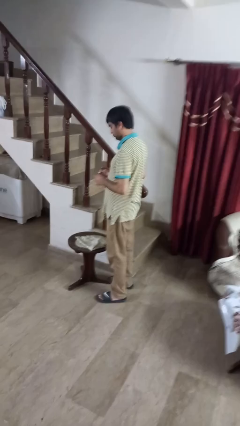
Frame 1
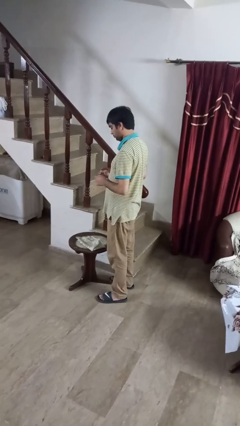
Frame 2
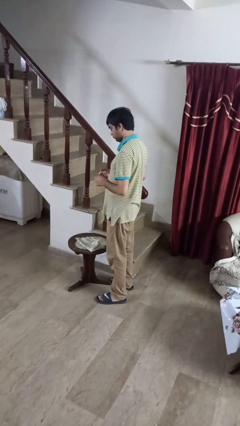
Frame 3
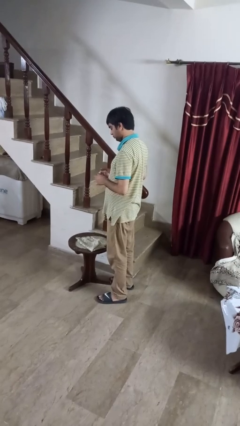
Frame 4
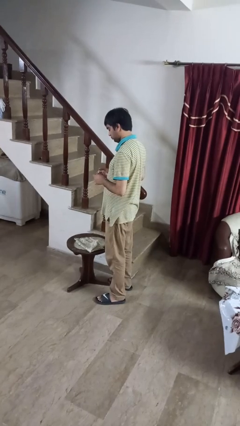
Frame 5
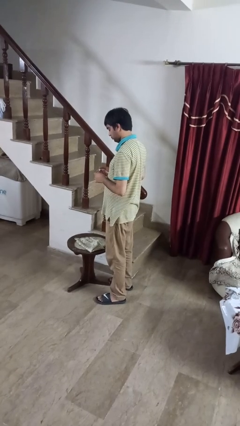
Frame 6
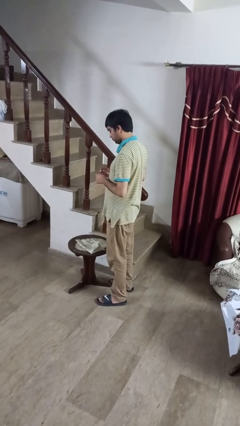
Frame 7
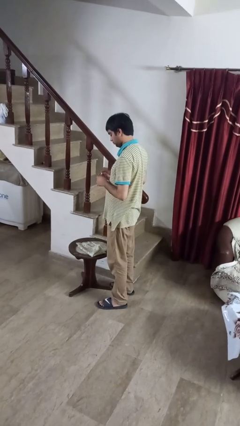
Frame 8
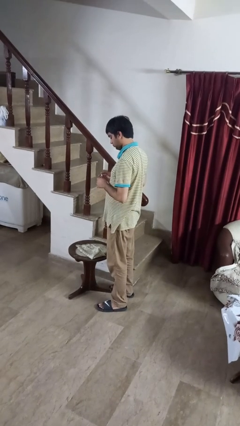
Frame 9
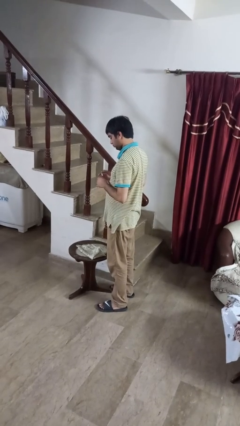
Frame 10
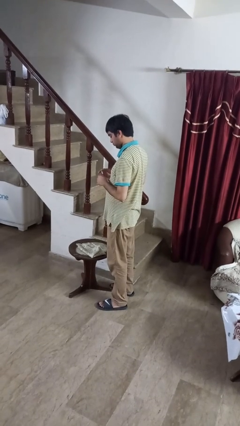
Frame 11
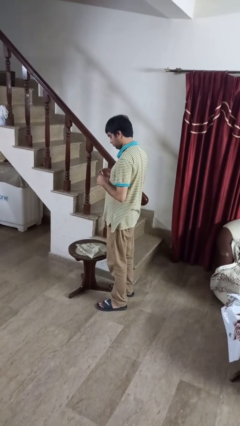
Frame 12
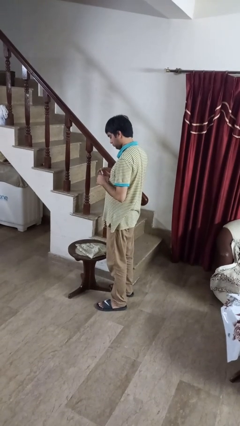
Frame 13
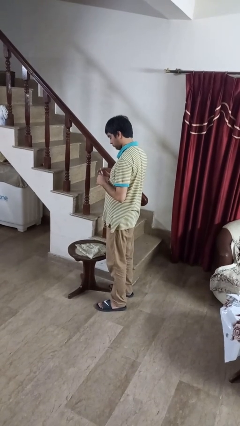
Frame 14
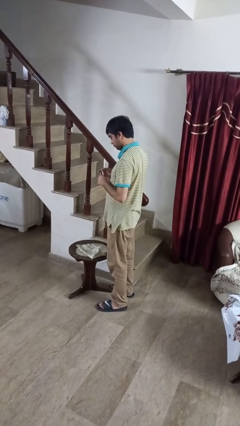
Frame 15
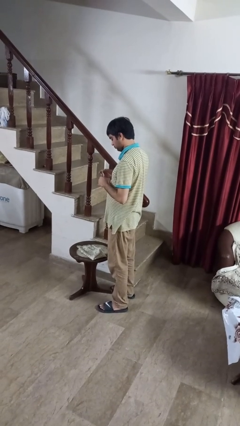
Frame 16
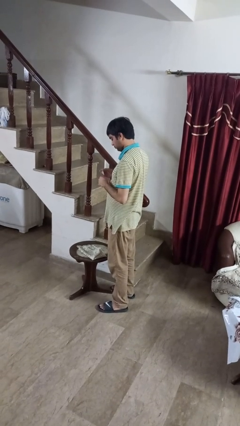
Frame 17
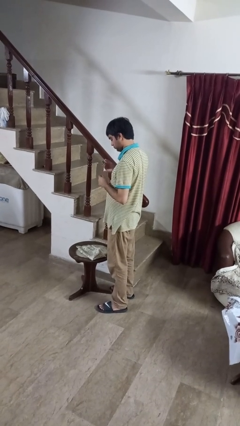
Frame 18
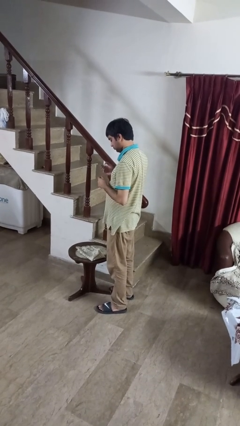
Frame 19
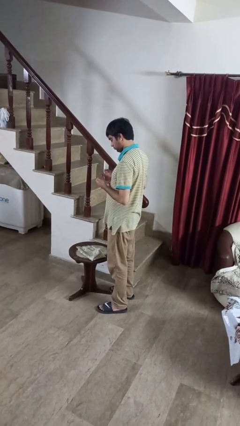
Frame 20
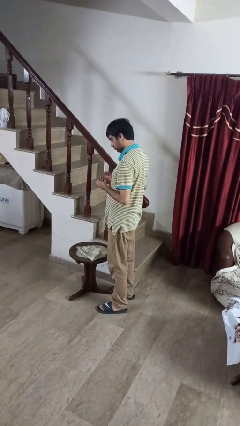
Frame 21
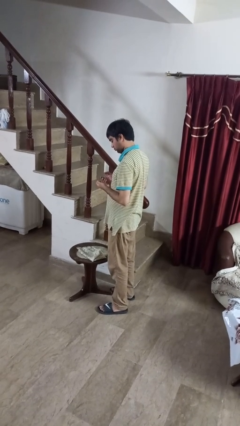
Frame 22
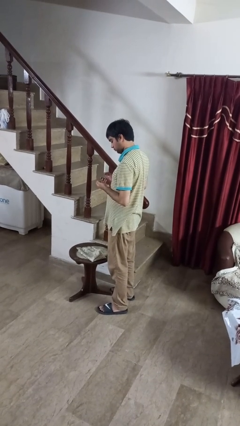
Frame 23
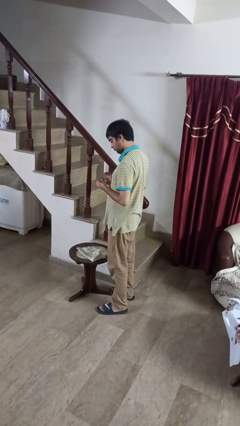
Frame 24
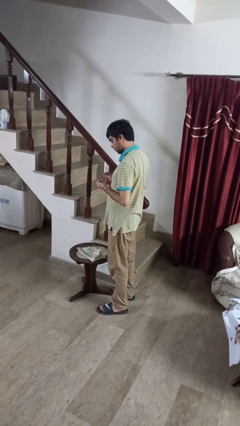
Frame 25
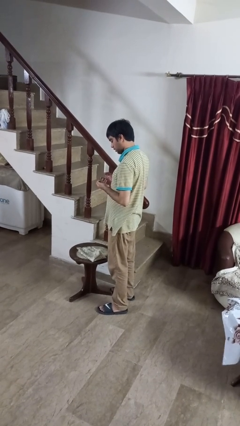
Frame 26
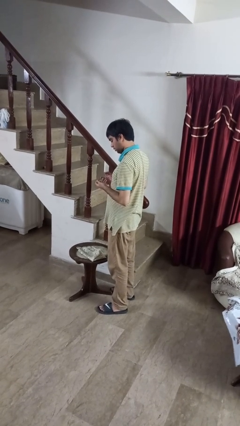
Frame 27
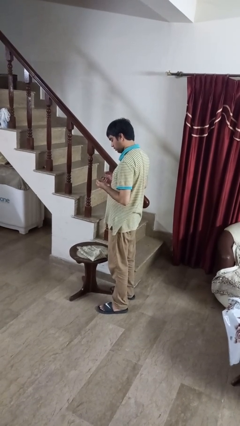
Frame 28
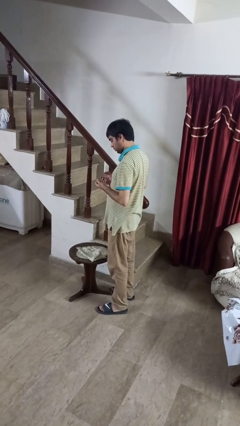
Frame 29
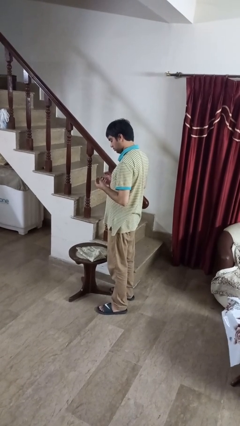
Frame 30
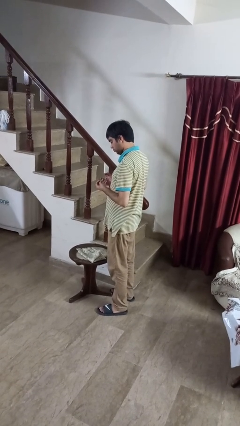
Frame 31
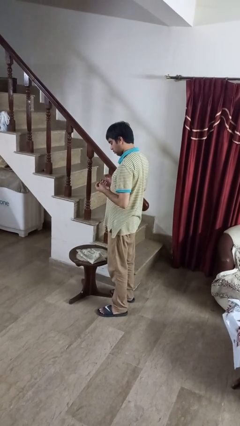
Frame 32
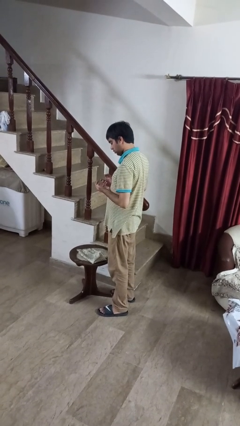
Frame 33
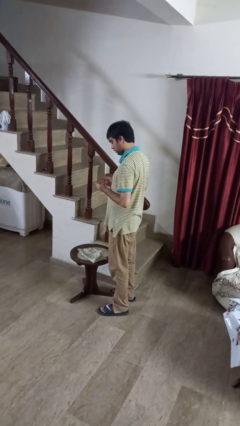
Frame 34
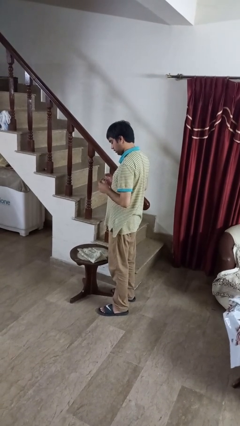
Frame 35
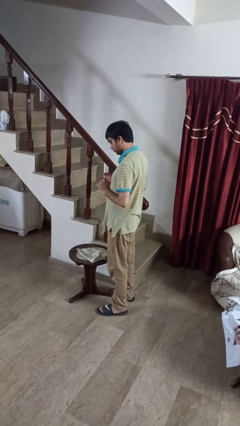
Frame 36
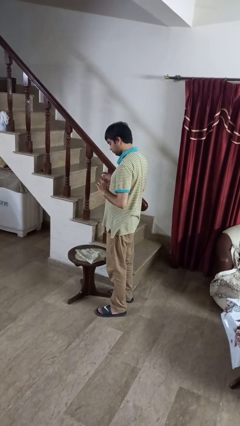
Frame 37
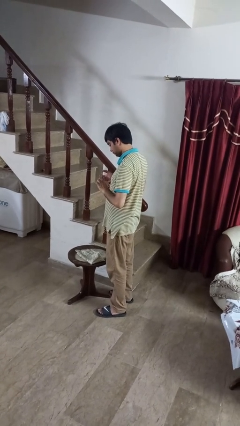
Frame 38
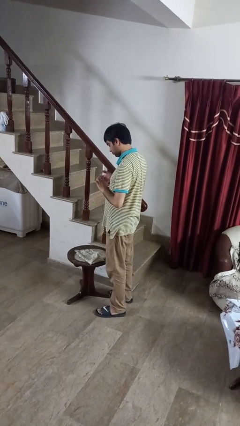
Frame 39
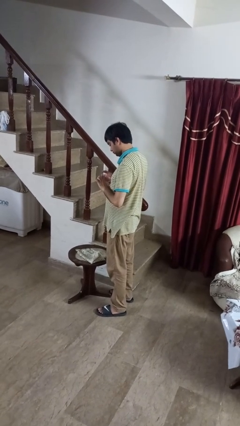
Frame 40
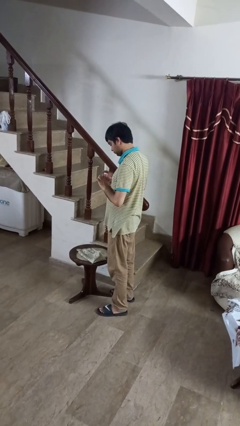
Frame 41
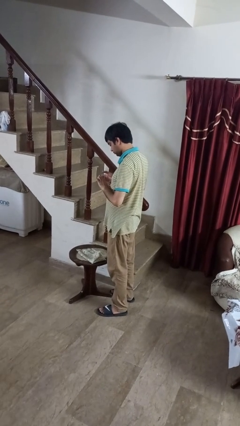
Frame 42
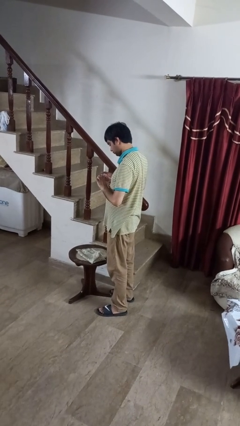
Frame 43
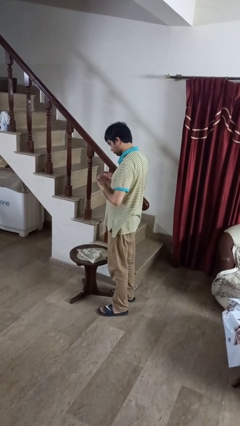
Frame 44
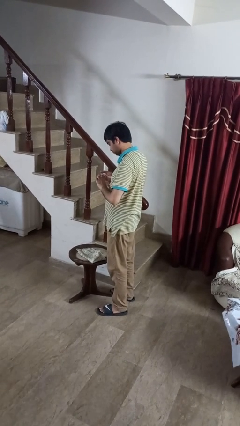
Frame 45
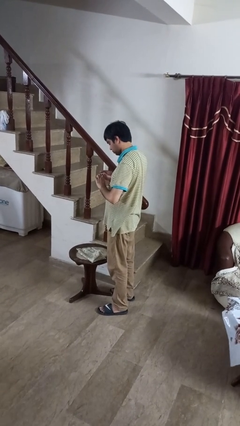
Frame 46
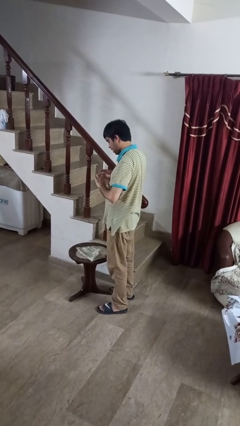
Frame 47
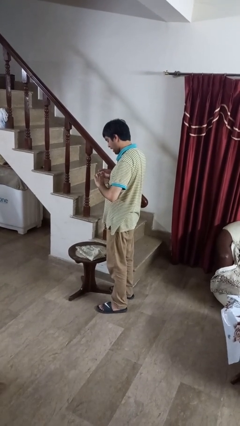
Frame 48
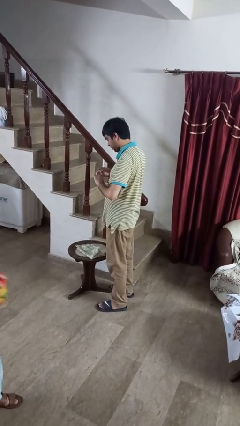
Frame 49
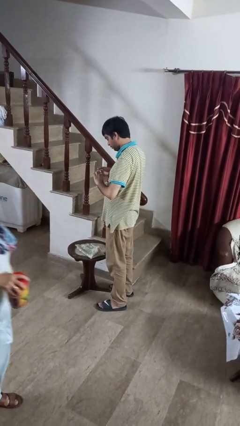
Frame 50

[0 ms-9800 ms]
person clips fingernails

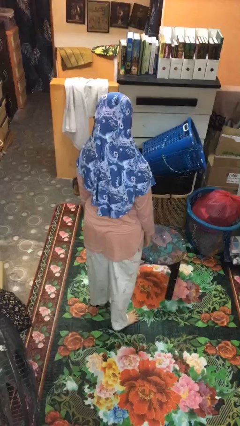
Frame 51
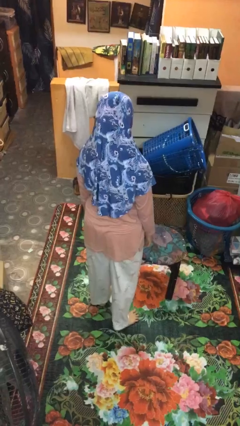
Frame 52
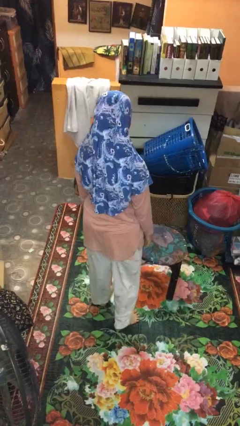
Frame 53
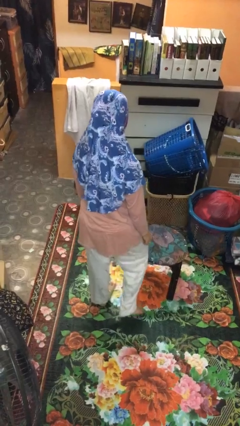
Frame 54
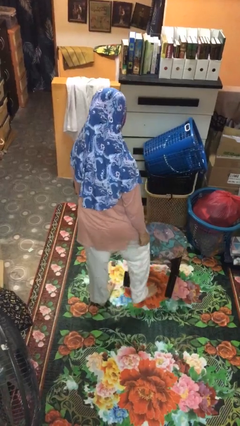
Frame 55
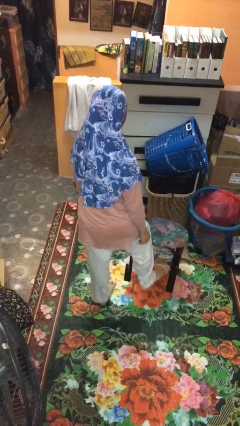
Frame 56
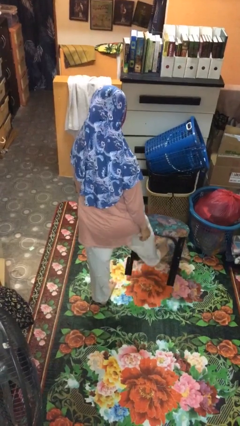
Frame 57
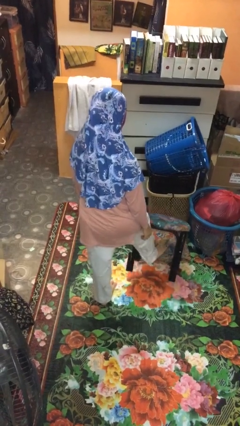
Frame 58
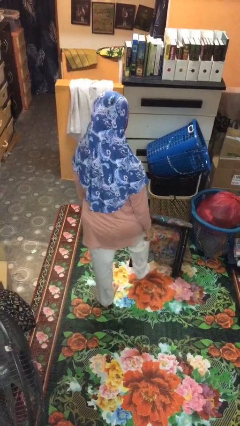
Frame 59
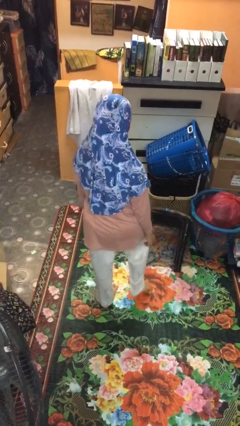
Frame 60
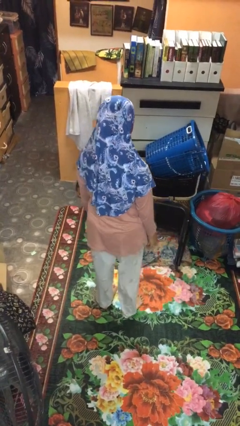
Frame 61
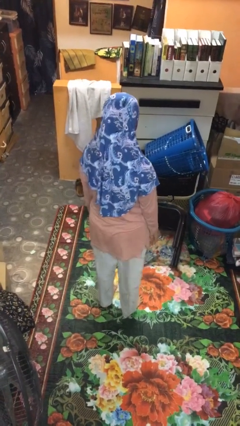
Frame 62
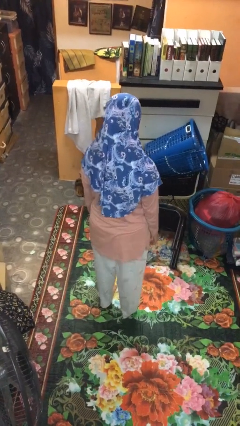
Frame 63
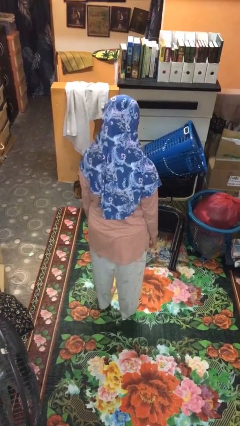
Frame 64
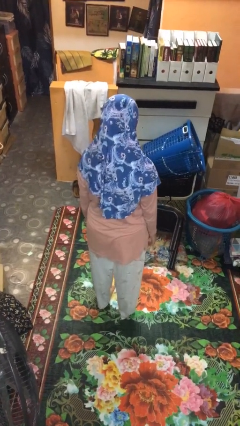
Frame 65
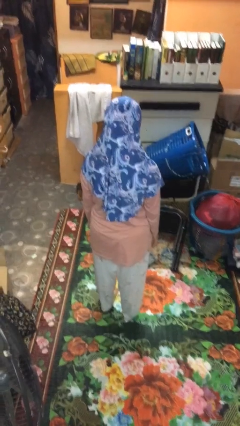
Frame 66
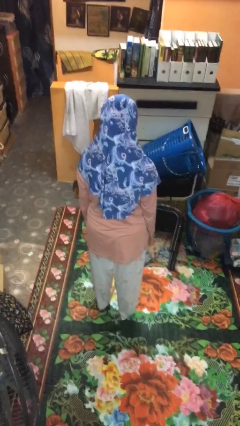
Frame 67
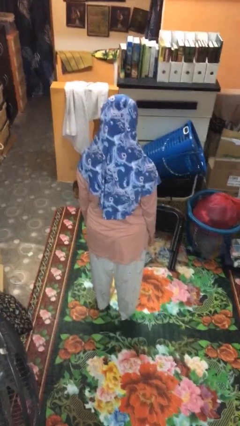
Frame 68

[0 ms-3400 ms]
person knocks over furniture

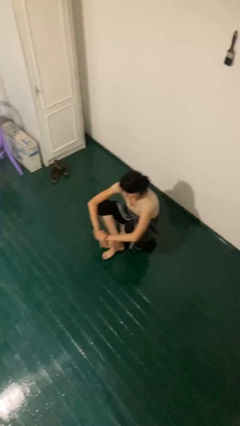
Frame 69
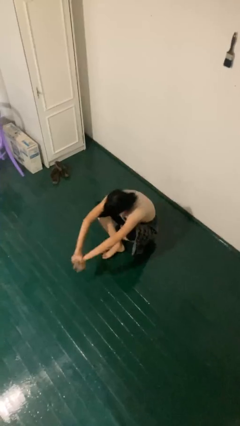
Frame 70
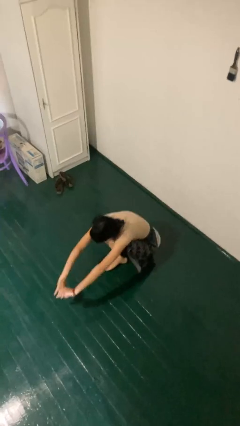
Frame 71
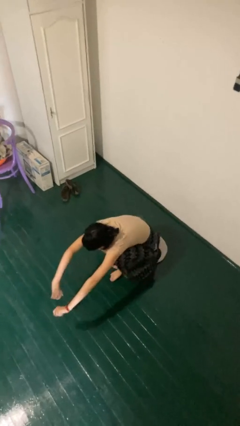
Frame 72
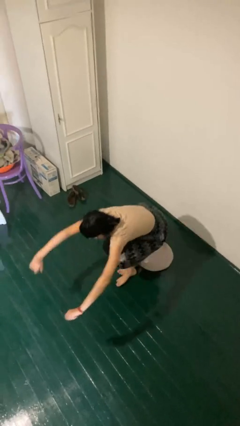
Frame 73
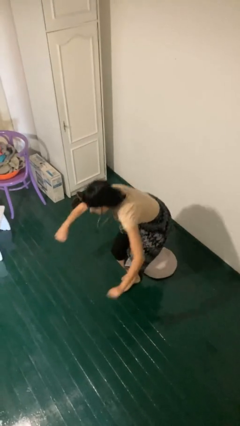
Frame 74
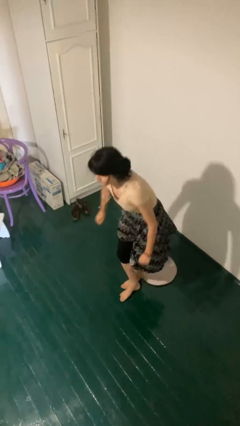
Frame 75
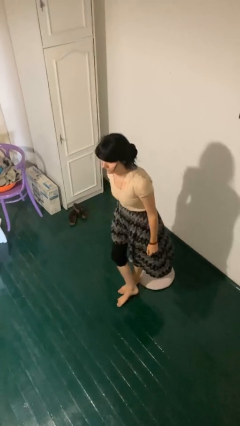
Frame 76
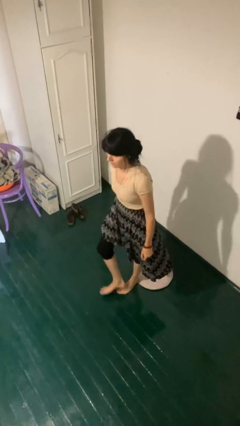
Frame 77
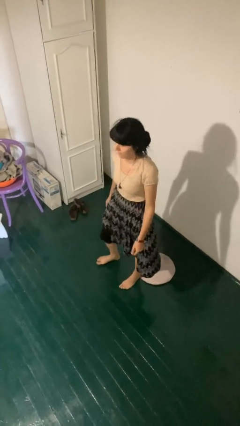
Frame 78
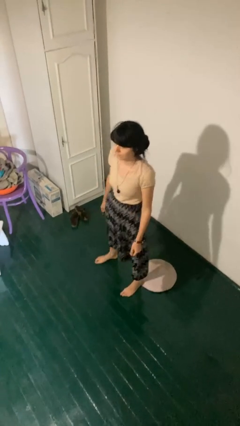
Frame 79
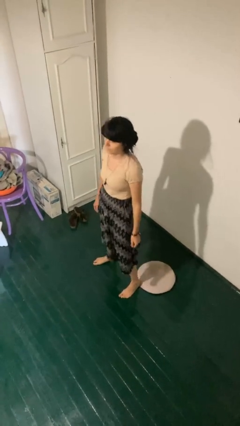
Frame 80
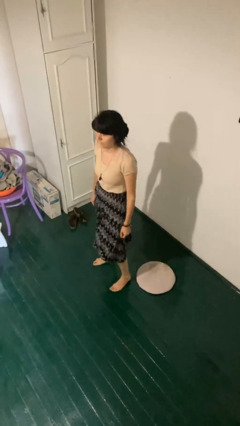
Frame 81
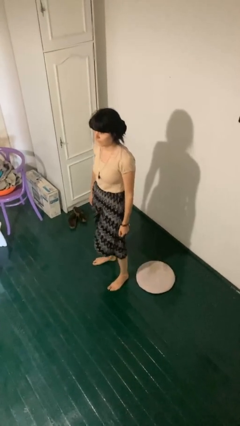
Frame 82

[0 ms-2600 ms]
person stands up from floor

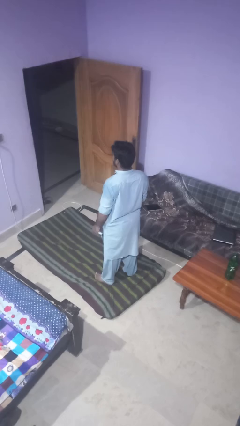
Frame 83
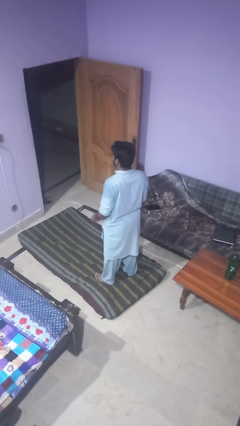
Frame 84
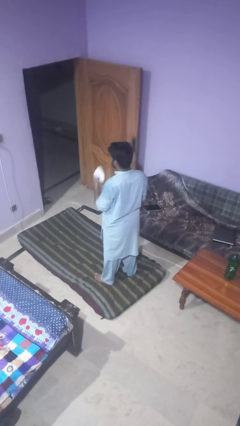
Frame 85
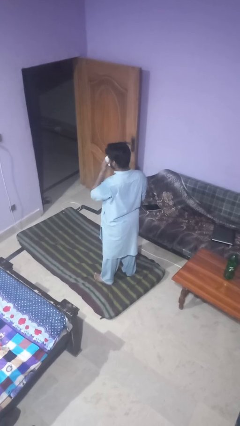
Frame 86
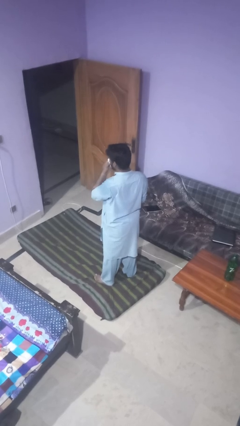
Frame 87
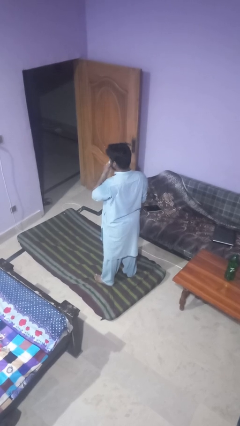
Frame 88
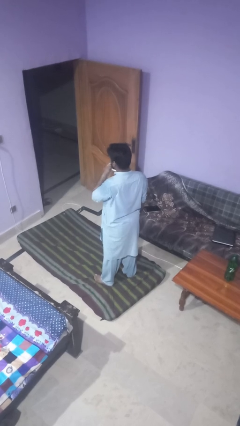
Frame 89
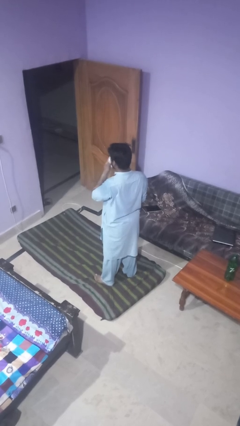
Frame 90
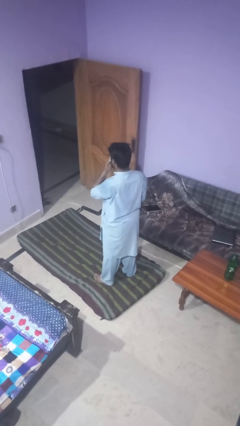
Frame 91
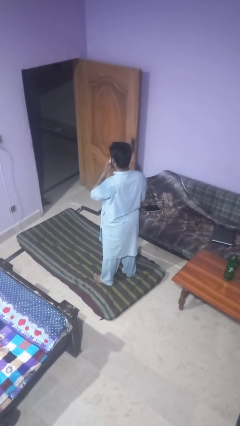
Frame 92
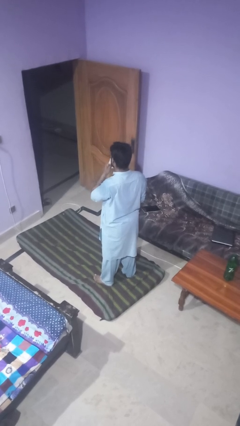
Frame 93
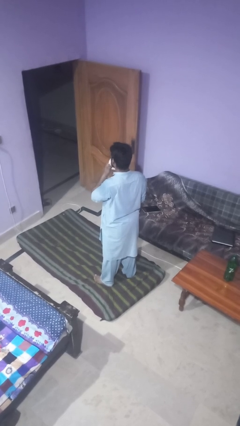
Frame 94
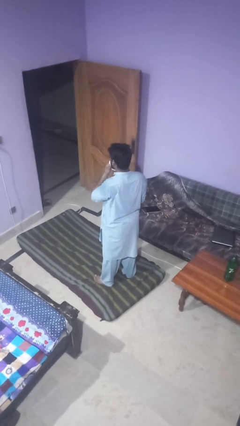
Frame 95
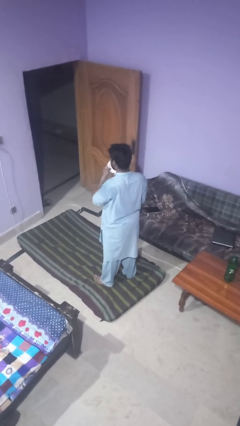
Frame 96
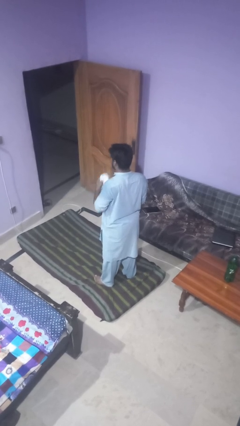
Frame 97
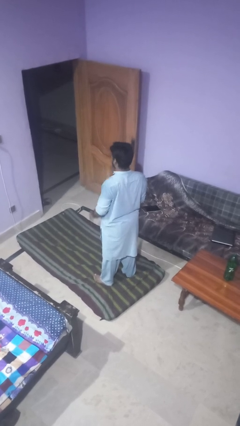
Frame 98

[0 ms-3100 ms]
person wipes mouth with napkin
